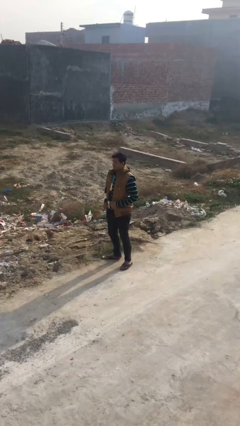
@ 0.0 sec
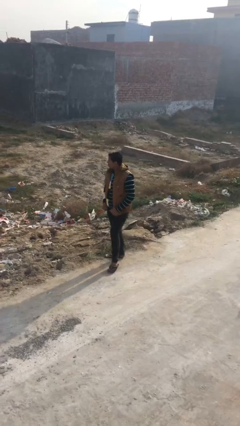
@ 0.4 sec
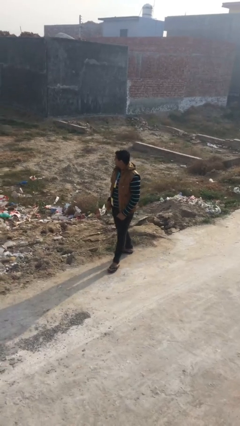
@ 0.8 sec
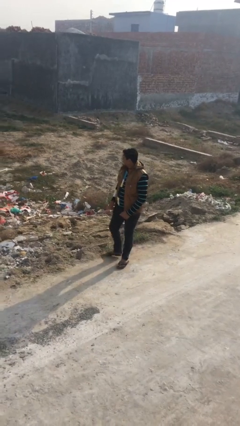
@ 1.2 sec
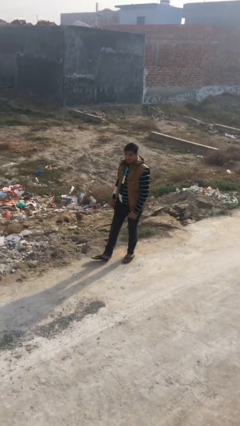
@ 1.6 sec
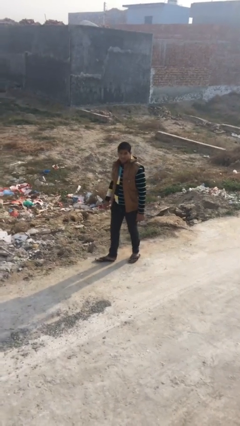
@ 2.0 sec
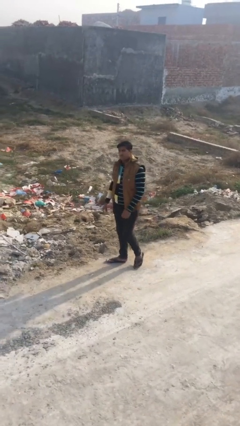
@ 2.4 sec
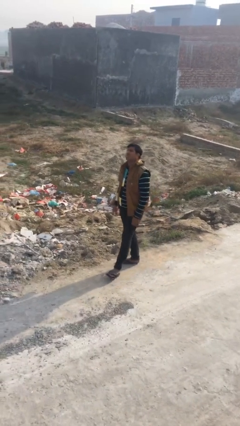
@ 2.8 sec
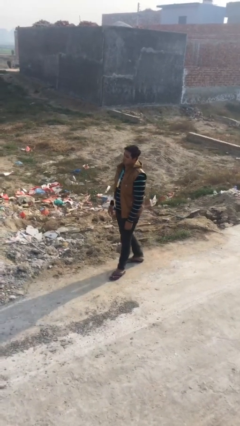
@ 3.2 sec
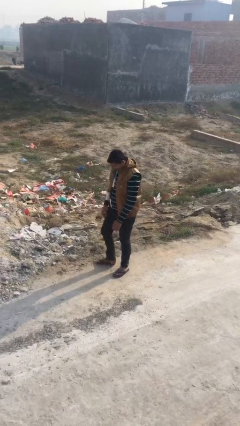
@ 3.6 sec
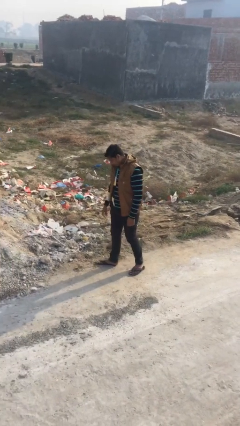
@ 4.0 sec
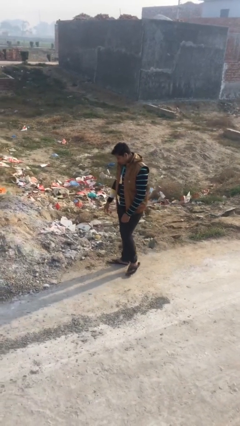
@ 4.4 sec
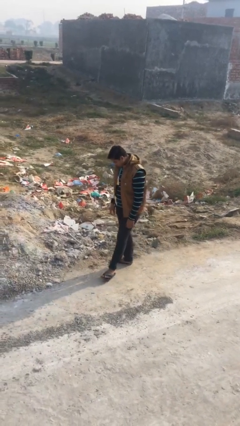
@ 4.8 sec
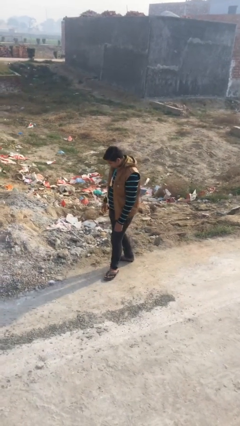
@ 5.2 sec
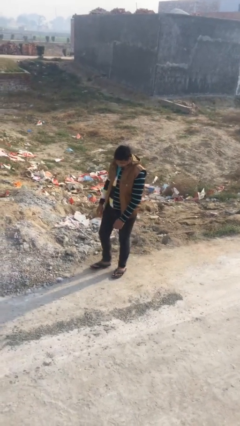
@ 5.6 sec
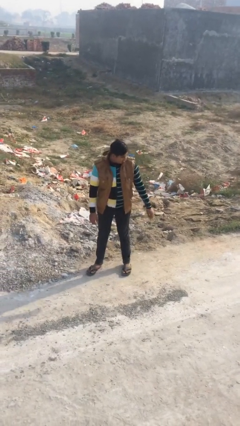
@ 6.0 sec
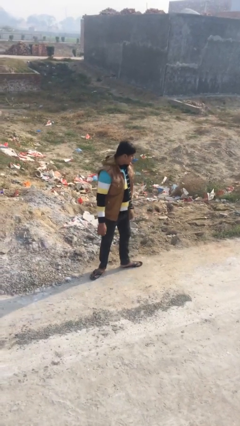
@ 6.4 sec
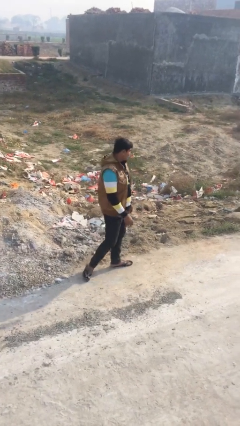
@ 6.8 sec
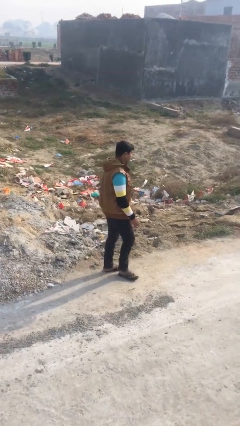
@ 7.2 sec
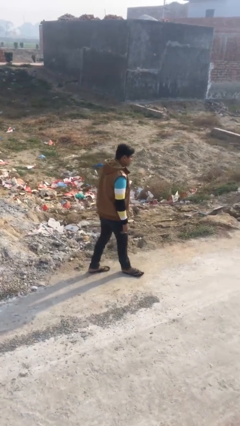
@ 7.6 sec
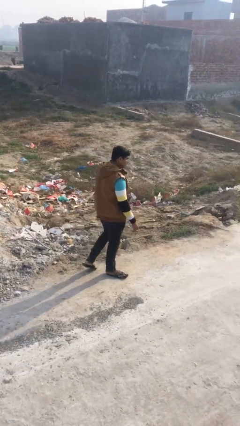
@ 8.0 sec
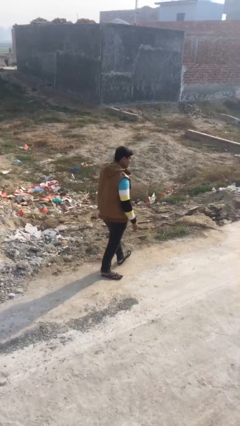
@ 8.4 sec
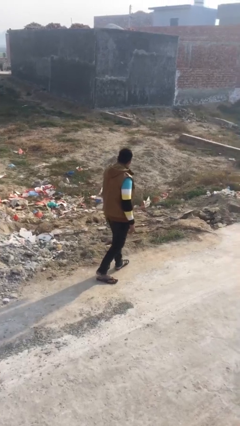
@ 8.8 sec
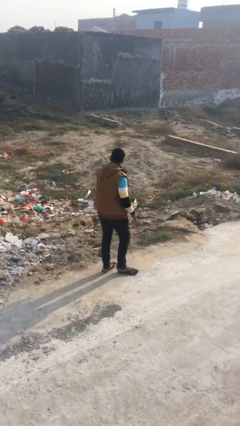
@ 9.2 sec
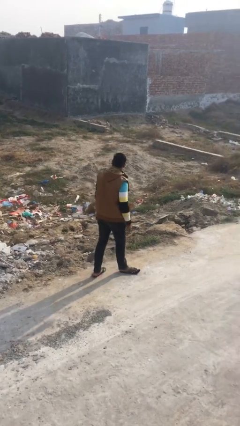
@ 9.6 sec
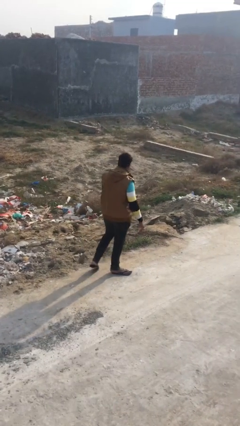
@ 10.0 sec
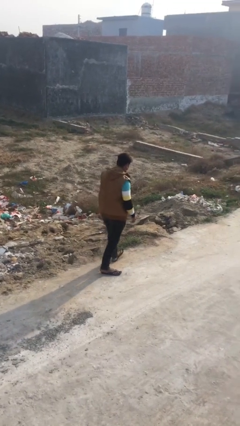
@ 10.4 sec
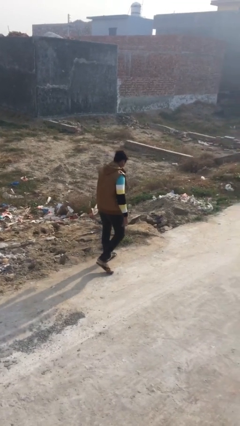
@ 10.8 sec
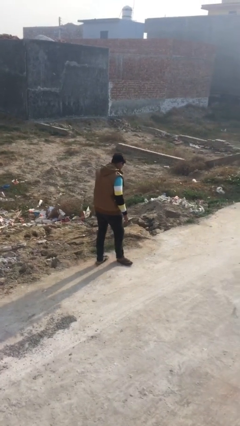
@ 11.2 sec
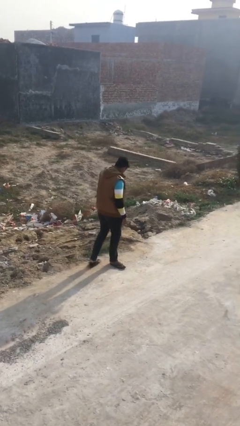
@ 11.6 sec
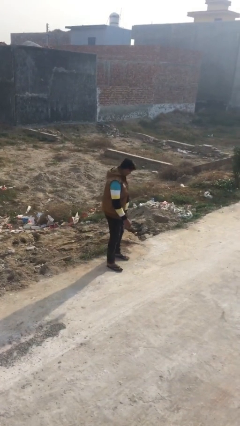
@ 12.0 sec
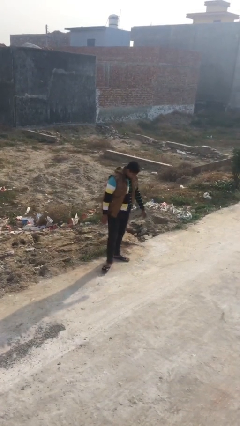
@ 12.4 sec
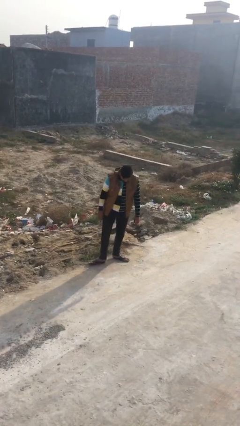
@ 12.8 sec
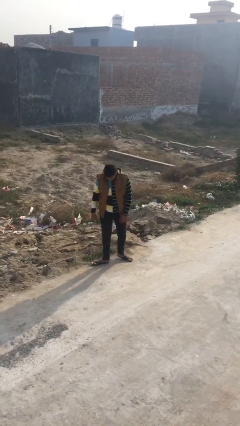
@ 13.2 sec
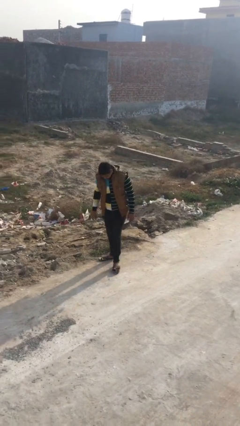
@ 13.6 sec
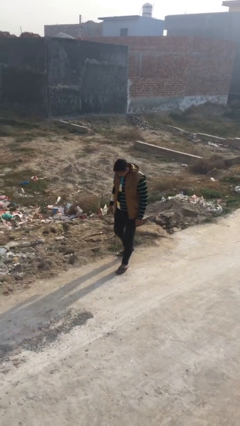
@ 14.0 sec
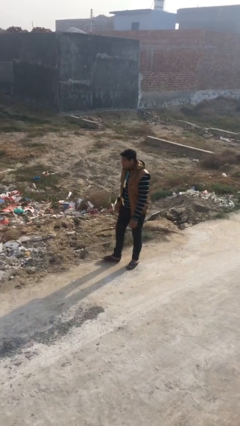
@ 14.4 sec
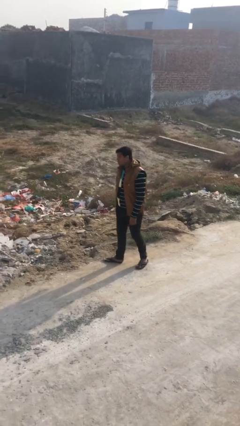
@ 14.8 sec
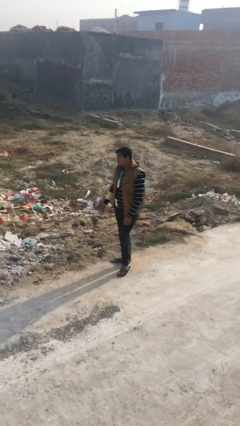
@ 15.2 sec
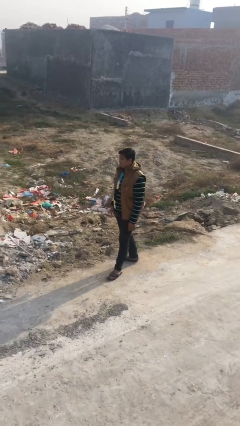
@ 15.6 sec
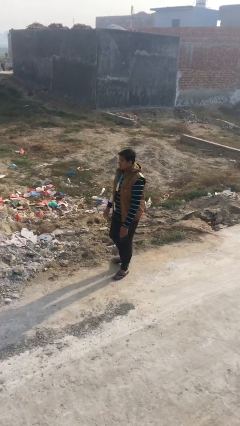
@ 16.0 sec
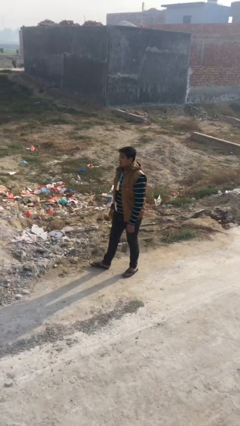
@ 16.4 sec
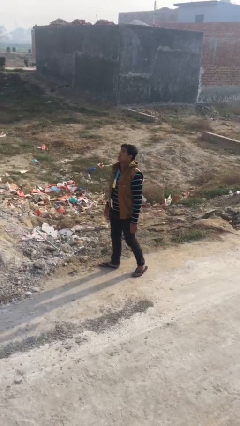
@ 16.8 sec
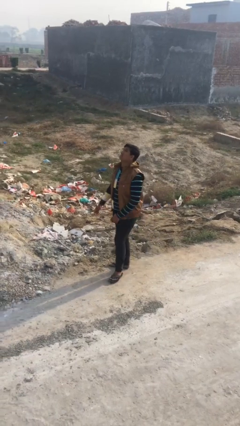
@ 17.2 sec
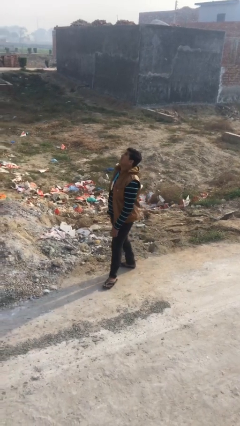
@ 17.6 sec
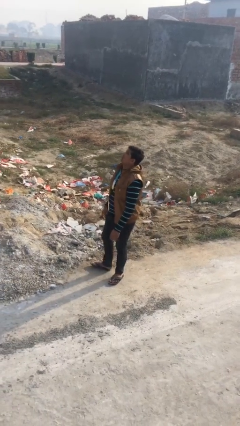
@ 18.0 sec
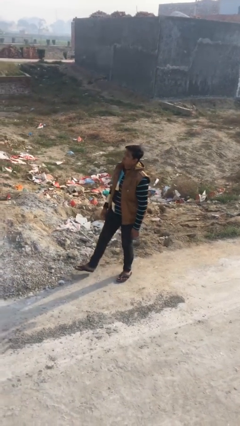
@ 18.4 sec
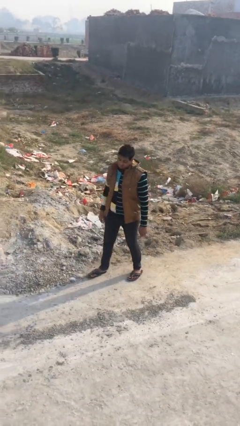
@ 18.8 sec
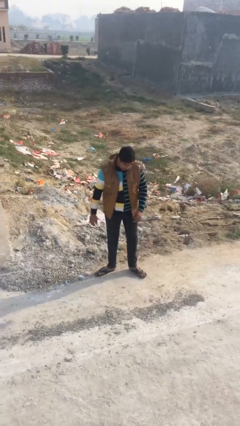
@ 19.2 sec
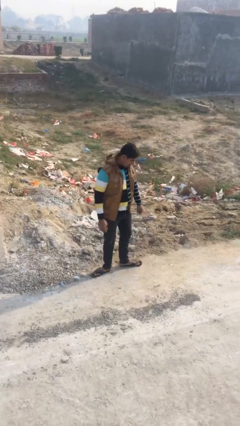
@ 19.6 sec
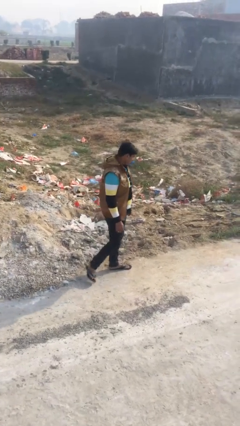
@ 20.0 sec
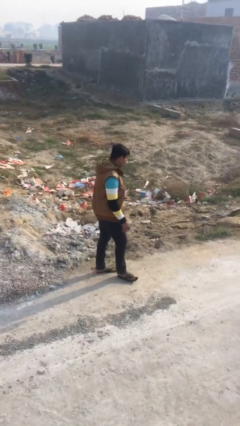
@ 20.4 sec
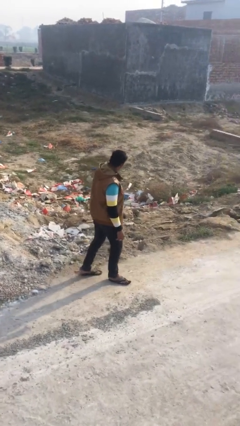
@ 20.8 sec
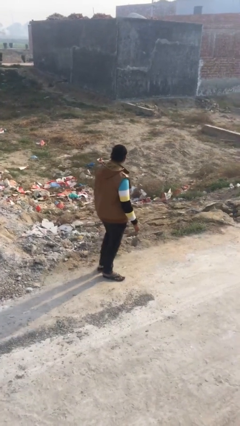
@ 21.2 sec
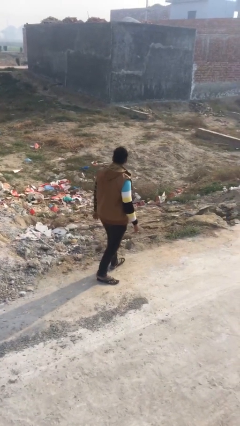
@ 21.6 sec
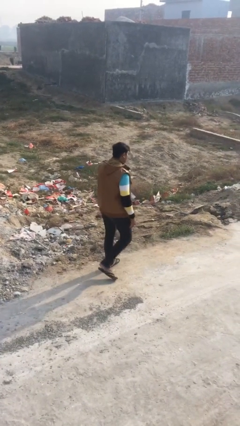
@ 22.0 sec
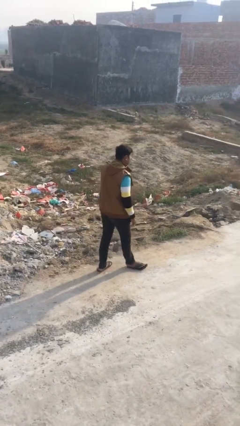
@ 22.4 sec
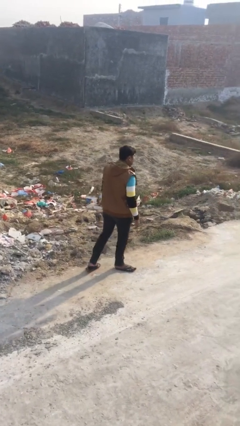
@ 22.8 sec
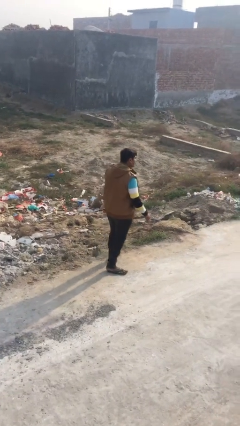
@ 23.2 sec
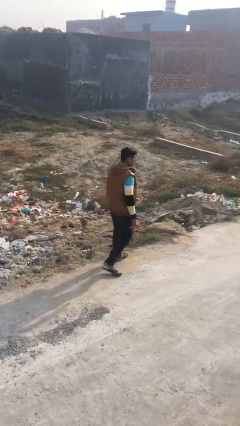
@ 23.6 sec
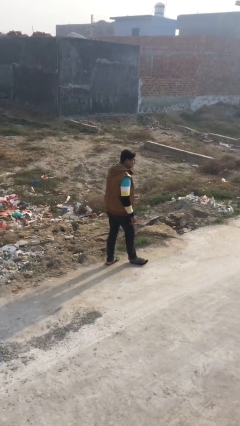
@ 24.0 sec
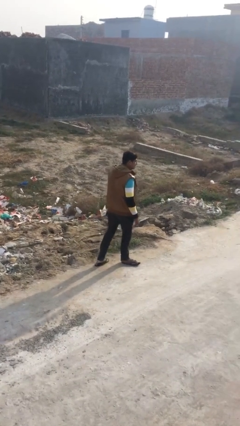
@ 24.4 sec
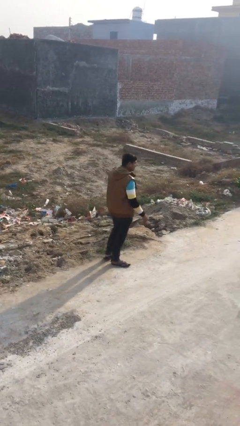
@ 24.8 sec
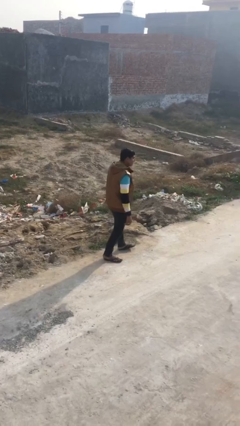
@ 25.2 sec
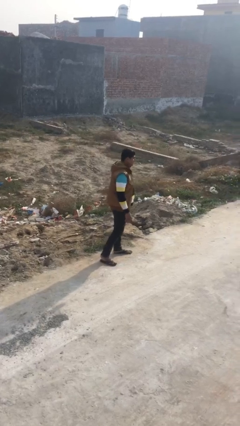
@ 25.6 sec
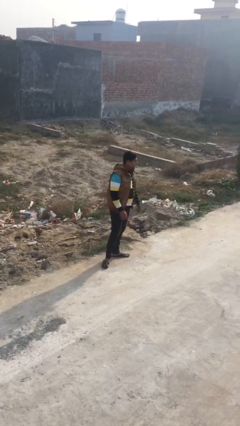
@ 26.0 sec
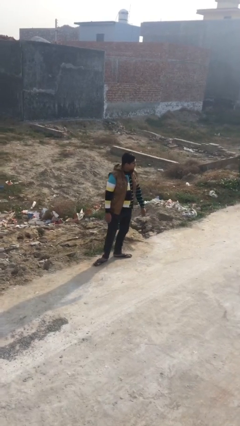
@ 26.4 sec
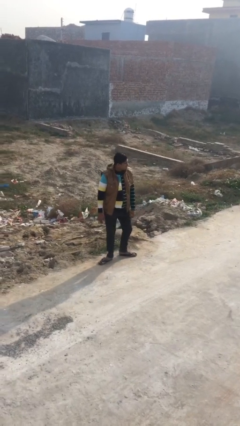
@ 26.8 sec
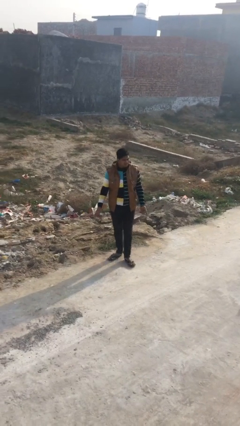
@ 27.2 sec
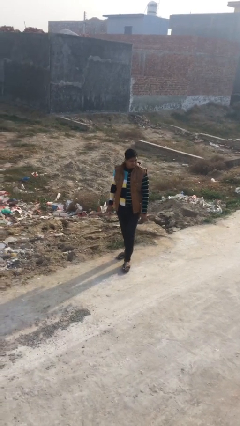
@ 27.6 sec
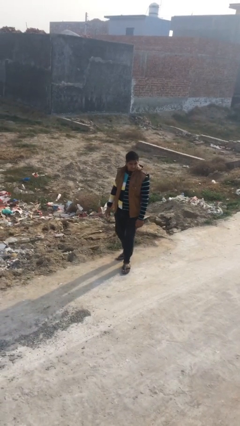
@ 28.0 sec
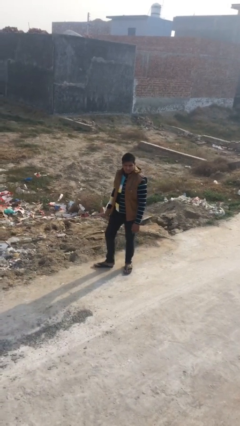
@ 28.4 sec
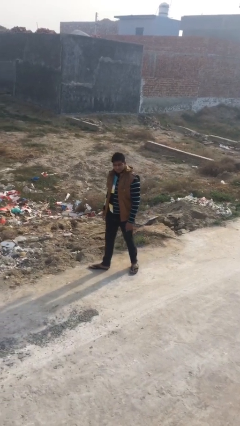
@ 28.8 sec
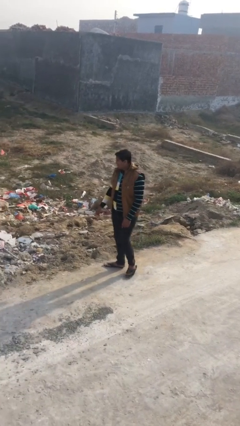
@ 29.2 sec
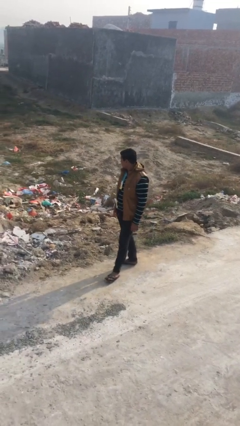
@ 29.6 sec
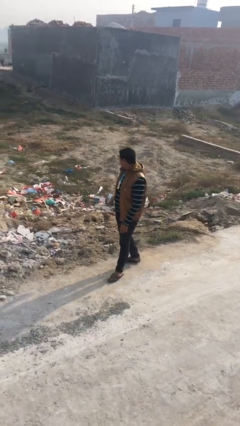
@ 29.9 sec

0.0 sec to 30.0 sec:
person walks

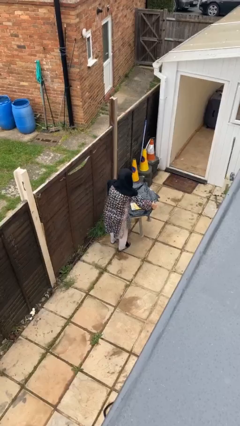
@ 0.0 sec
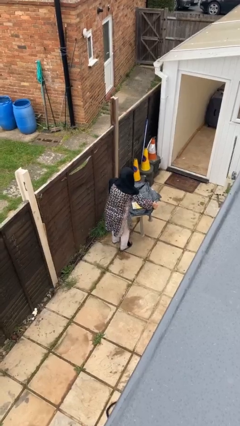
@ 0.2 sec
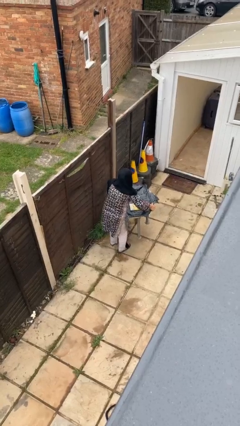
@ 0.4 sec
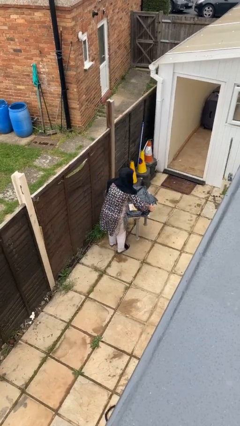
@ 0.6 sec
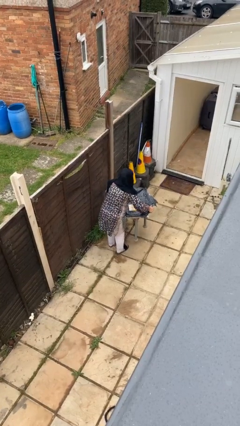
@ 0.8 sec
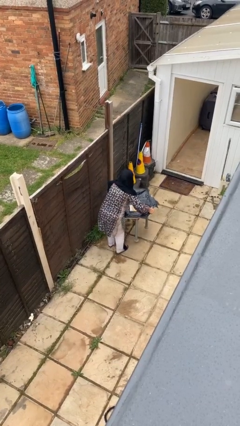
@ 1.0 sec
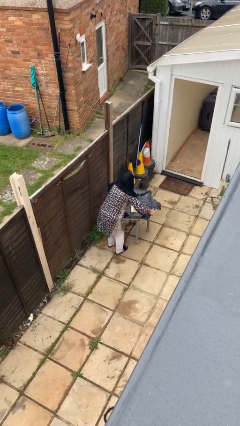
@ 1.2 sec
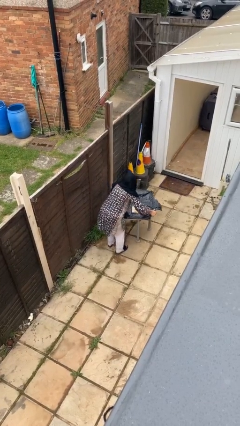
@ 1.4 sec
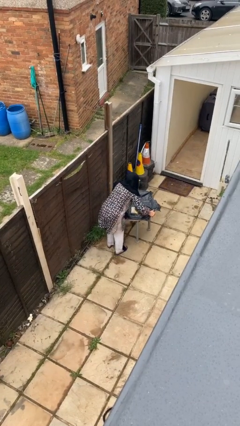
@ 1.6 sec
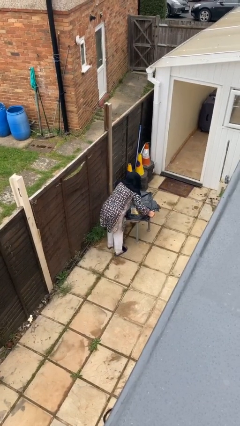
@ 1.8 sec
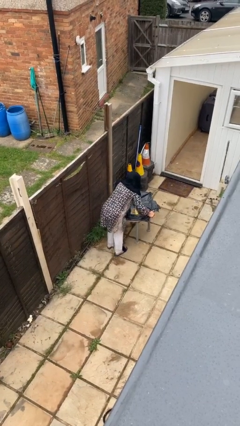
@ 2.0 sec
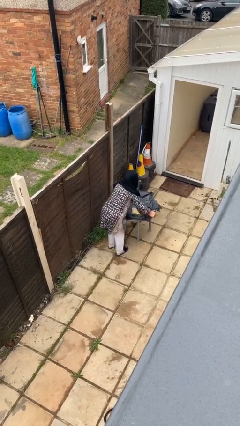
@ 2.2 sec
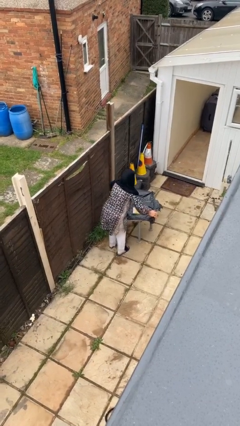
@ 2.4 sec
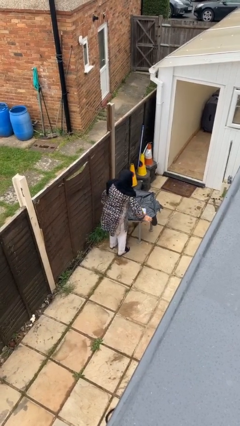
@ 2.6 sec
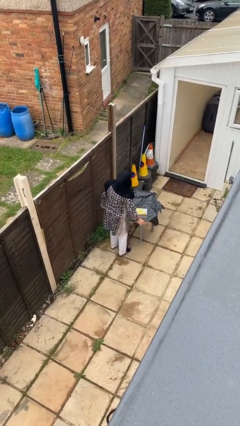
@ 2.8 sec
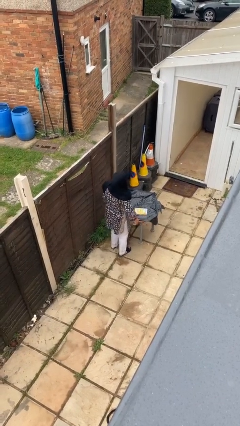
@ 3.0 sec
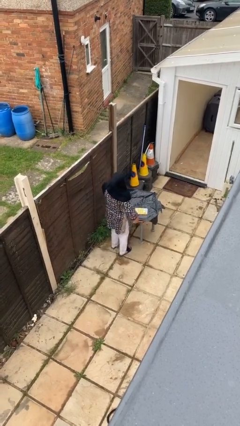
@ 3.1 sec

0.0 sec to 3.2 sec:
person puts down object on floor
